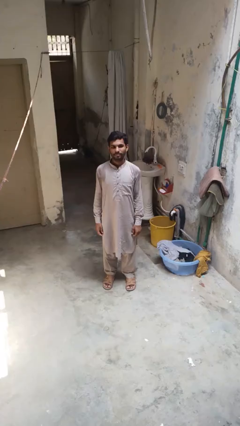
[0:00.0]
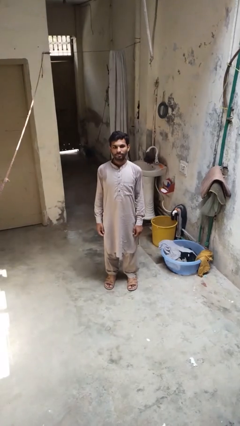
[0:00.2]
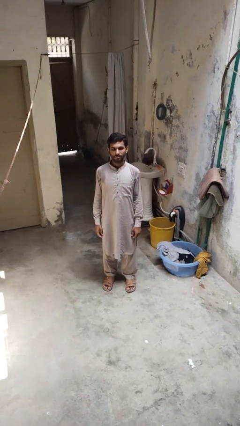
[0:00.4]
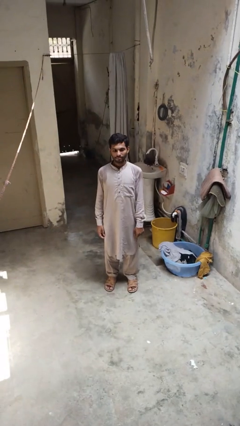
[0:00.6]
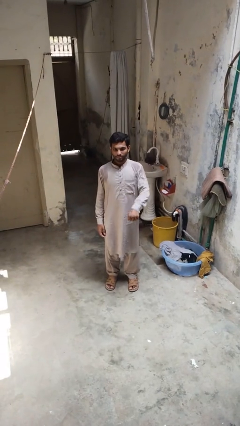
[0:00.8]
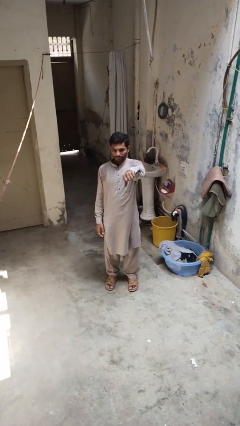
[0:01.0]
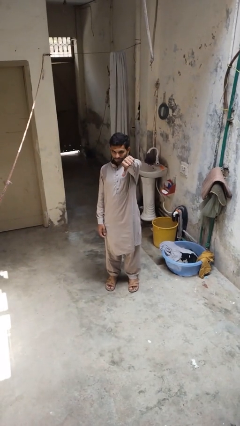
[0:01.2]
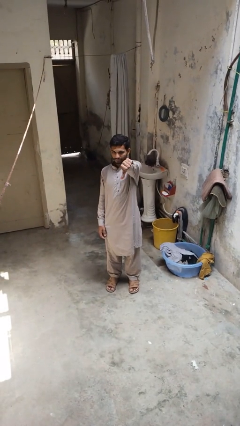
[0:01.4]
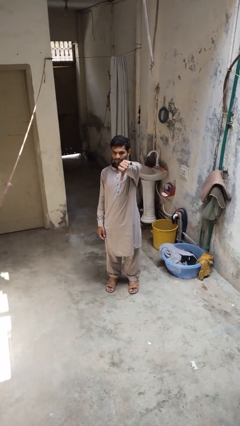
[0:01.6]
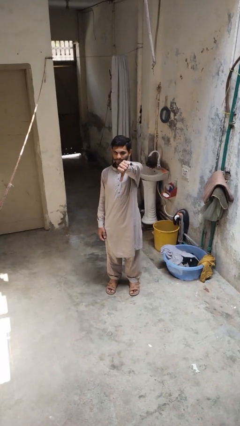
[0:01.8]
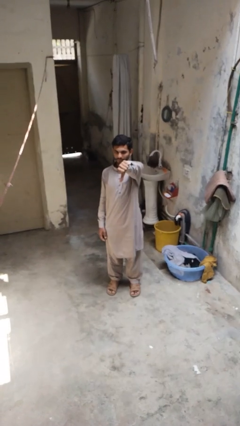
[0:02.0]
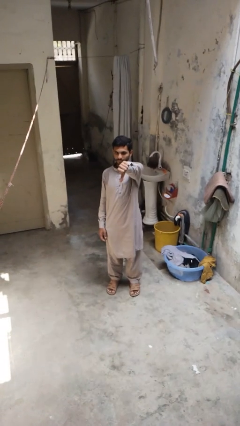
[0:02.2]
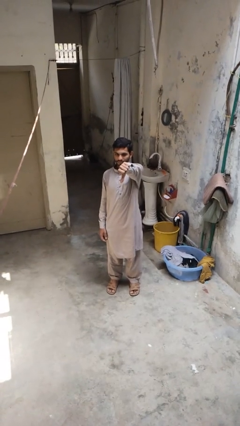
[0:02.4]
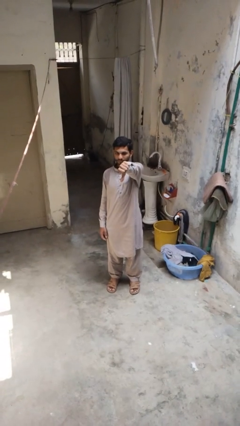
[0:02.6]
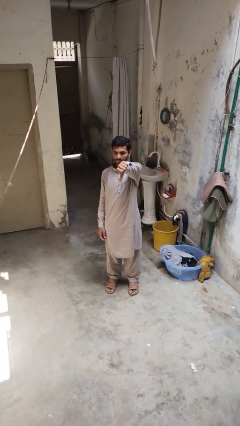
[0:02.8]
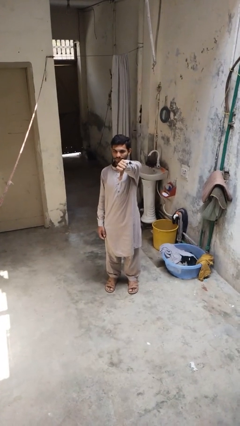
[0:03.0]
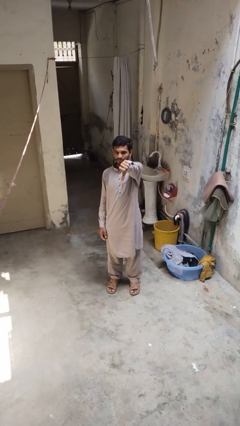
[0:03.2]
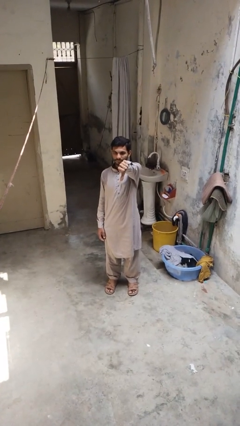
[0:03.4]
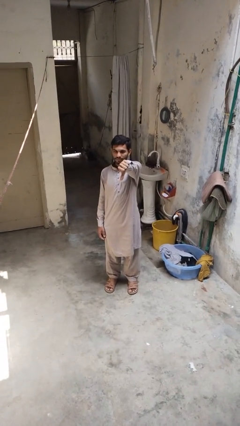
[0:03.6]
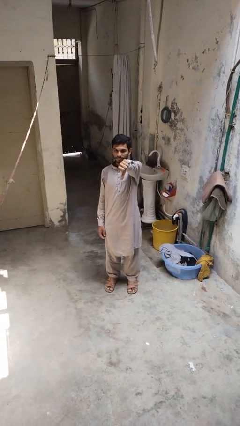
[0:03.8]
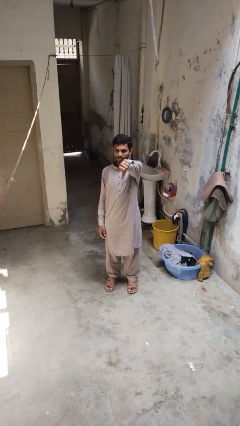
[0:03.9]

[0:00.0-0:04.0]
person gestures thumbs down

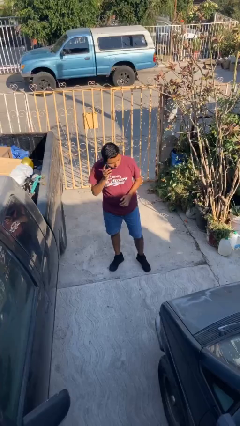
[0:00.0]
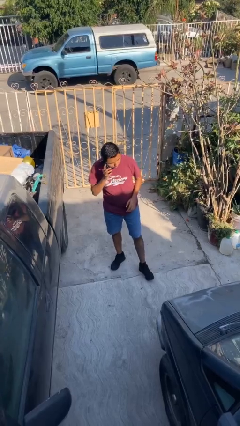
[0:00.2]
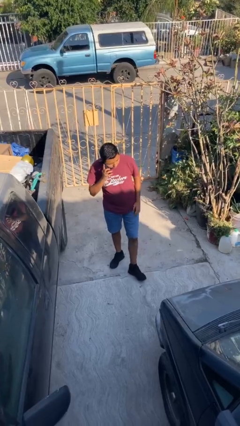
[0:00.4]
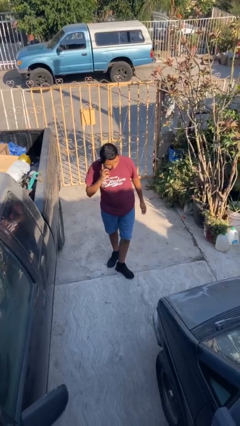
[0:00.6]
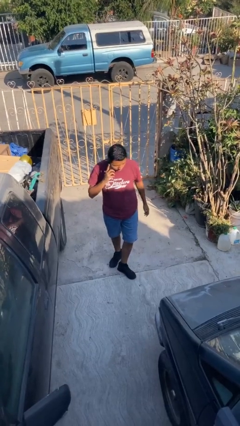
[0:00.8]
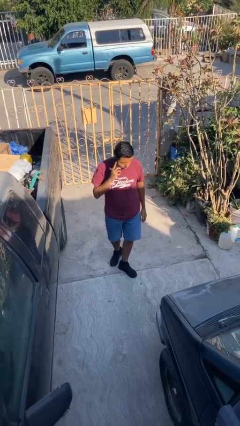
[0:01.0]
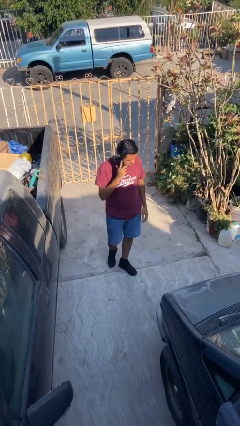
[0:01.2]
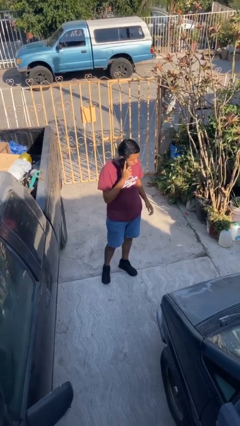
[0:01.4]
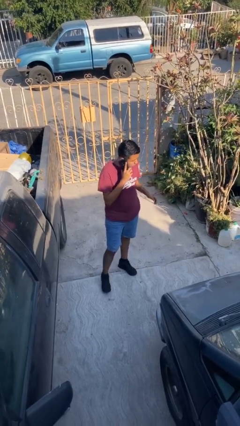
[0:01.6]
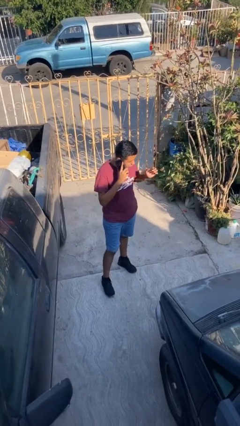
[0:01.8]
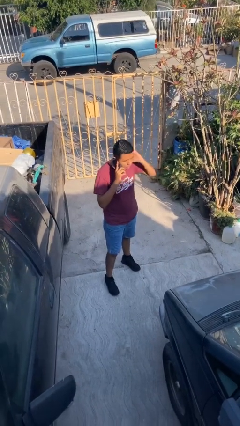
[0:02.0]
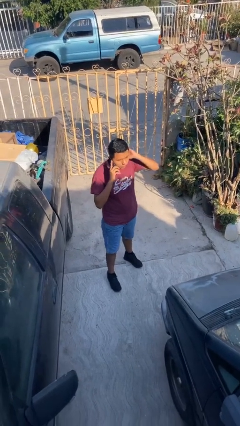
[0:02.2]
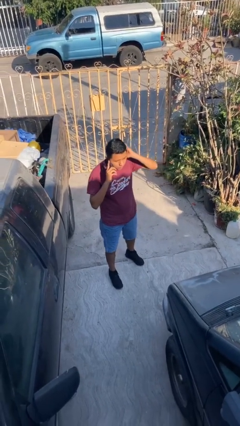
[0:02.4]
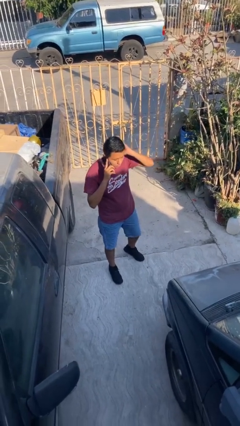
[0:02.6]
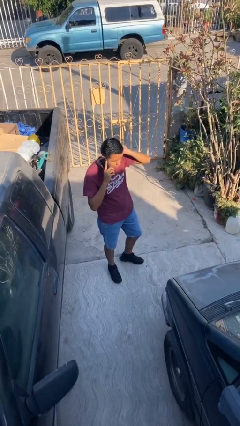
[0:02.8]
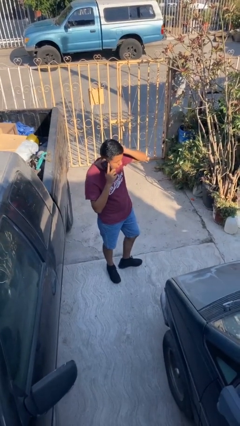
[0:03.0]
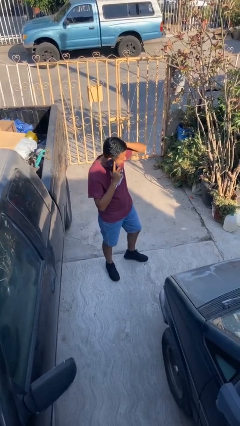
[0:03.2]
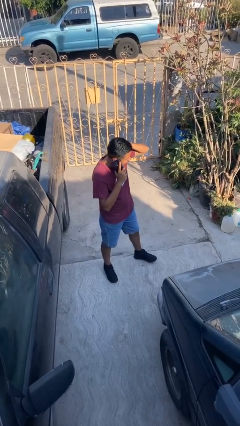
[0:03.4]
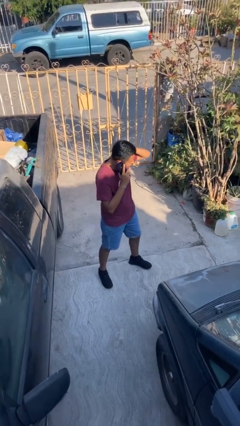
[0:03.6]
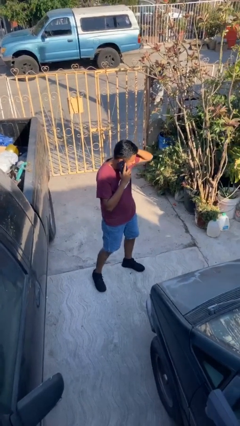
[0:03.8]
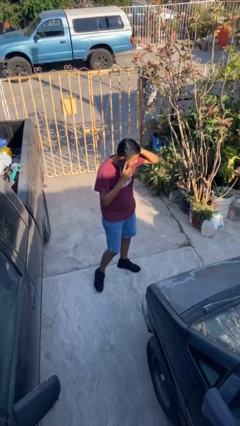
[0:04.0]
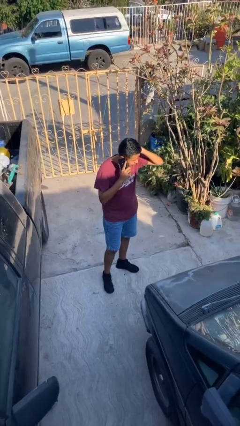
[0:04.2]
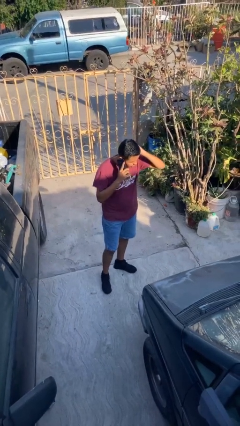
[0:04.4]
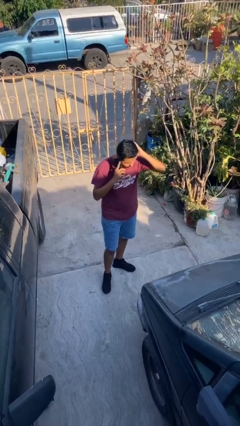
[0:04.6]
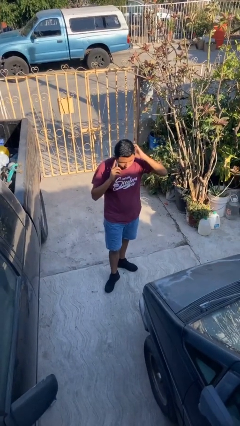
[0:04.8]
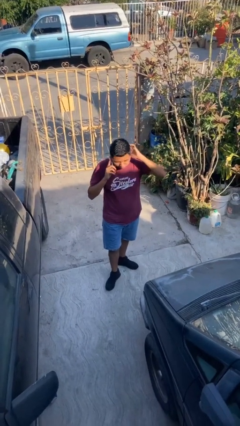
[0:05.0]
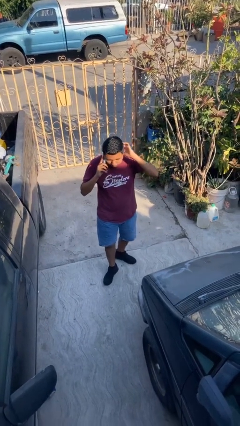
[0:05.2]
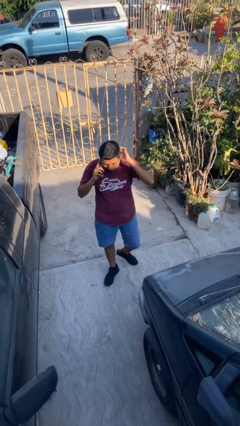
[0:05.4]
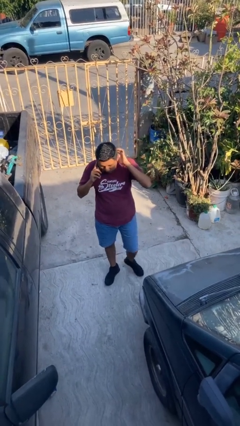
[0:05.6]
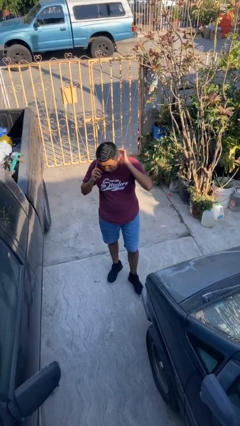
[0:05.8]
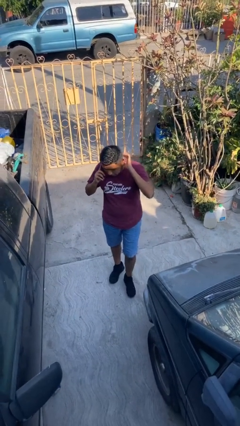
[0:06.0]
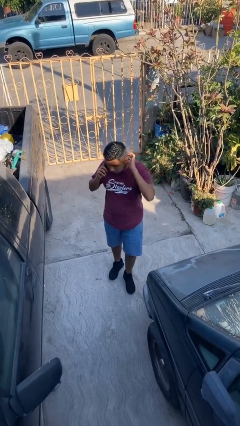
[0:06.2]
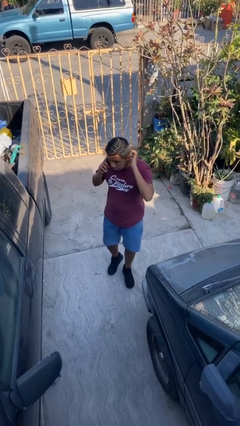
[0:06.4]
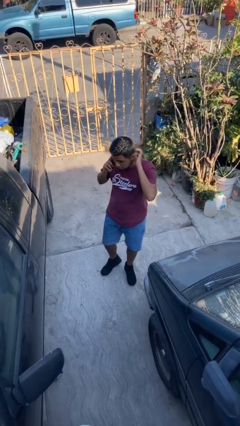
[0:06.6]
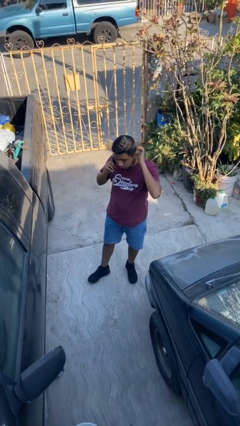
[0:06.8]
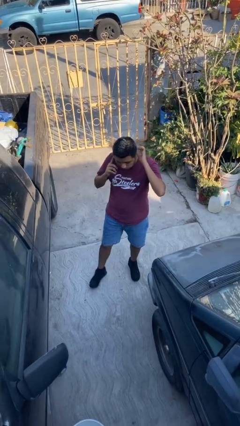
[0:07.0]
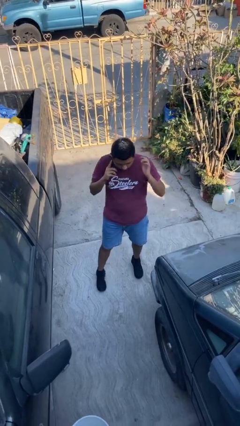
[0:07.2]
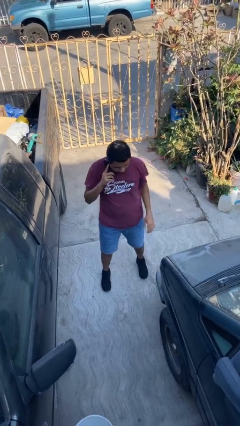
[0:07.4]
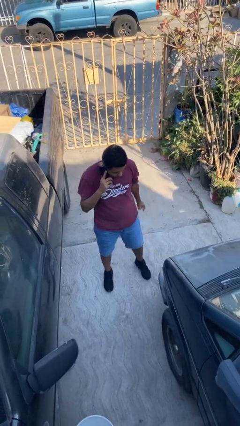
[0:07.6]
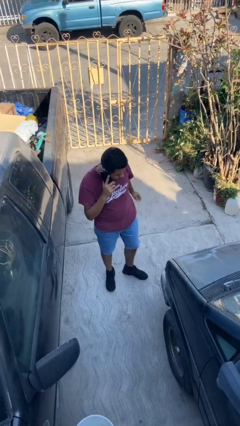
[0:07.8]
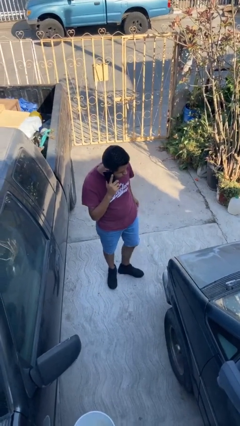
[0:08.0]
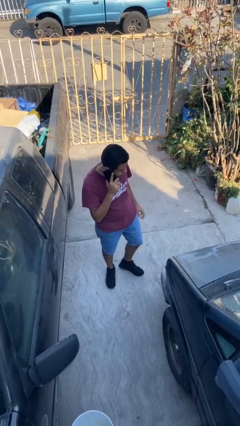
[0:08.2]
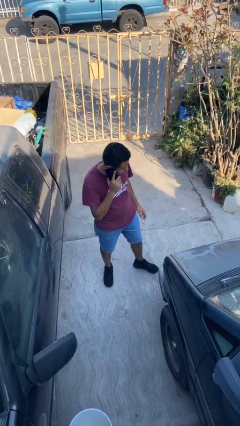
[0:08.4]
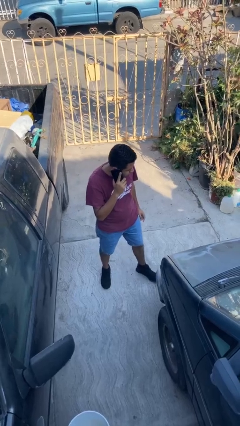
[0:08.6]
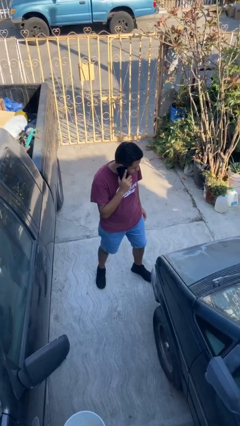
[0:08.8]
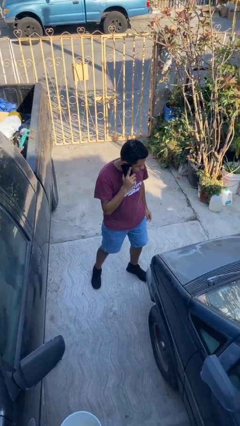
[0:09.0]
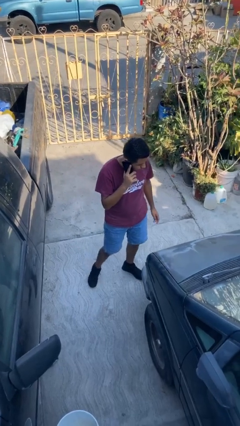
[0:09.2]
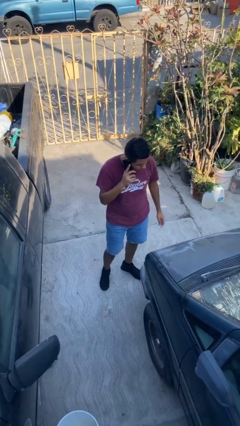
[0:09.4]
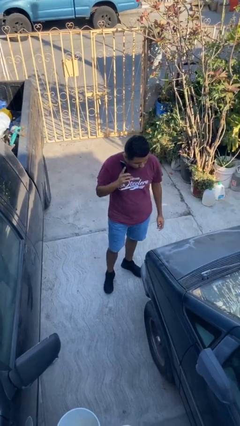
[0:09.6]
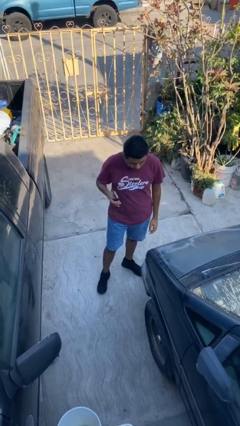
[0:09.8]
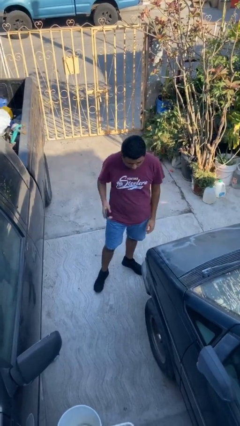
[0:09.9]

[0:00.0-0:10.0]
person talks on phone

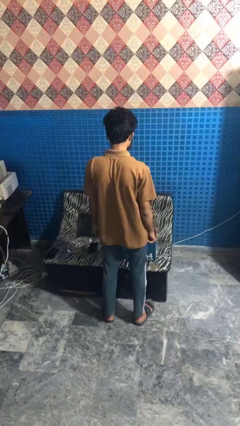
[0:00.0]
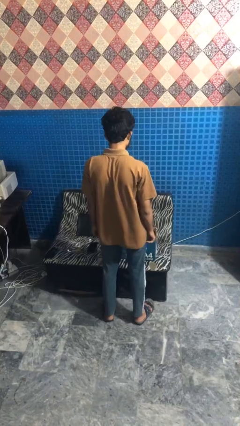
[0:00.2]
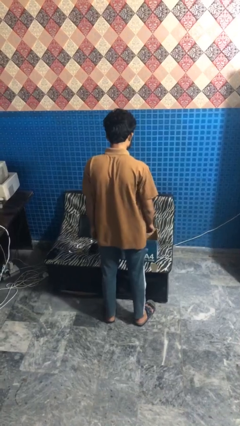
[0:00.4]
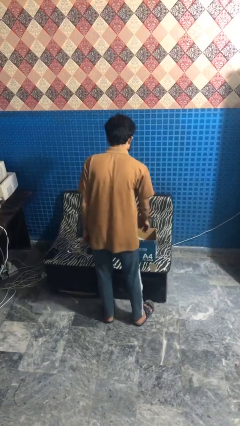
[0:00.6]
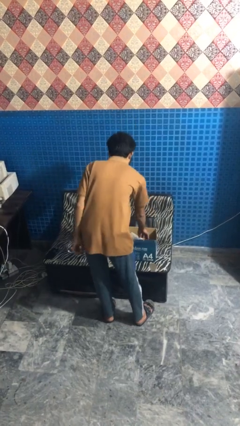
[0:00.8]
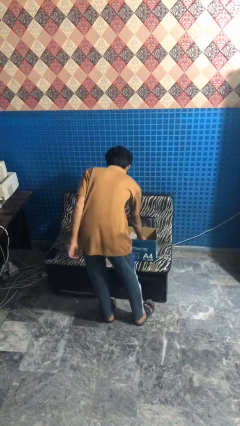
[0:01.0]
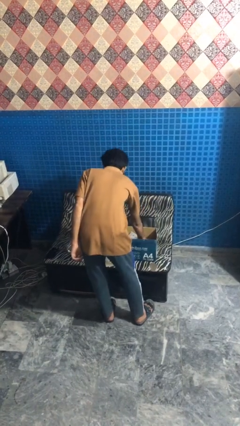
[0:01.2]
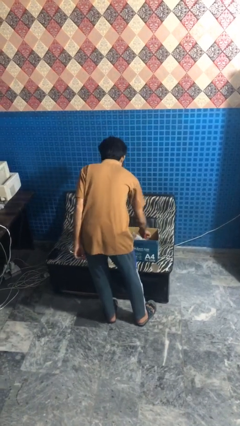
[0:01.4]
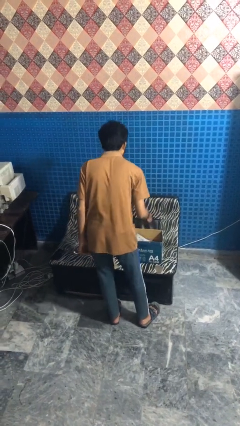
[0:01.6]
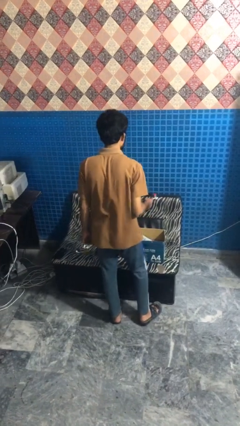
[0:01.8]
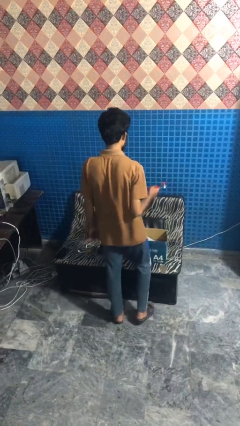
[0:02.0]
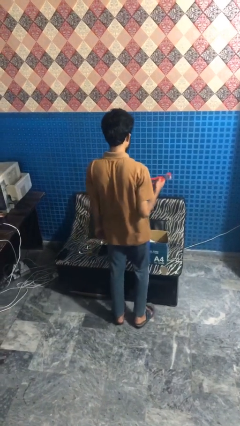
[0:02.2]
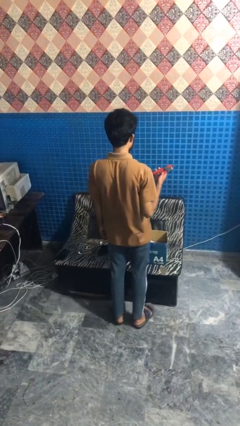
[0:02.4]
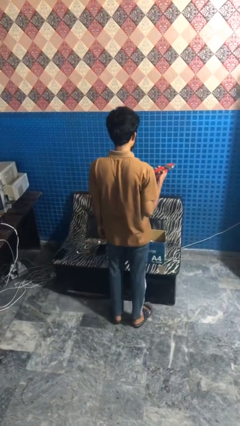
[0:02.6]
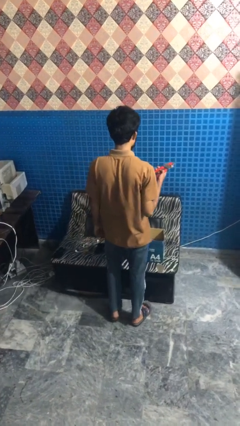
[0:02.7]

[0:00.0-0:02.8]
person takes object from box

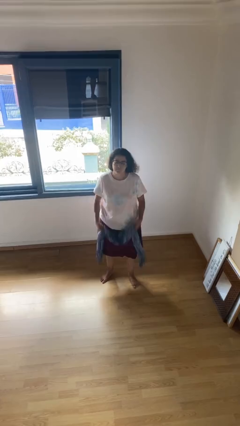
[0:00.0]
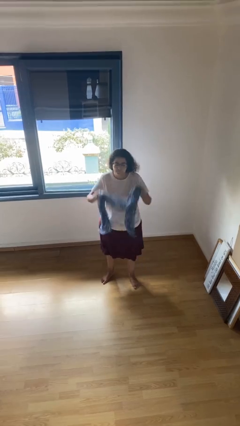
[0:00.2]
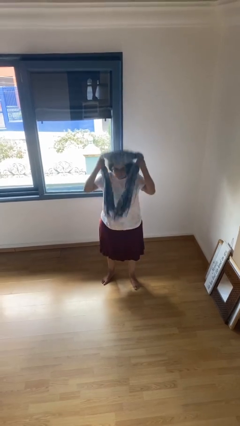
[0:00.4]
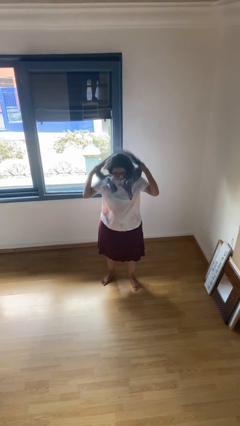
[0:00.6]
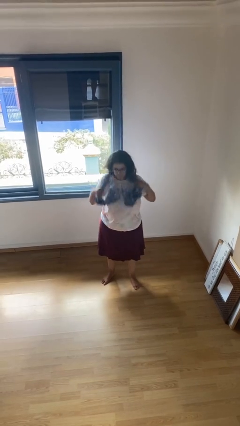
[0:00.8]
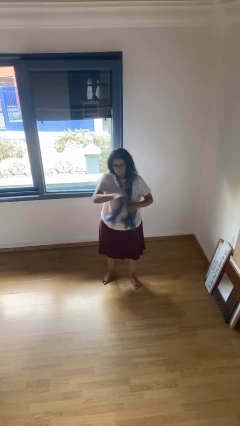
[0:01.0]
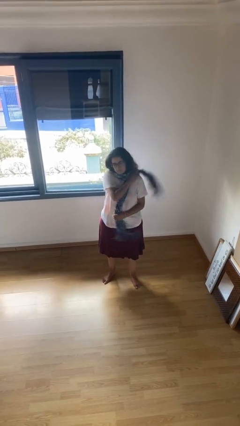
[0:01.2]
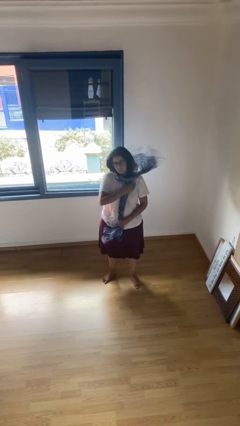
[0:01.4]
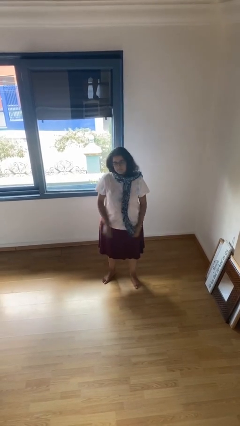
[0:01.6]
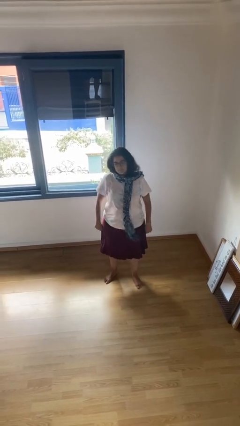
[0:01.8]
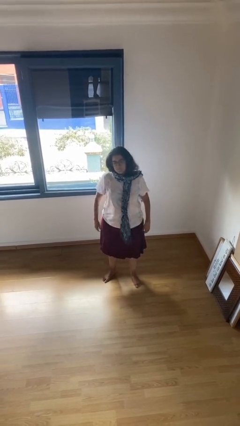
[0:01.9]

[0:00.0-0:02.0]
person puts on scarf
